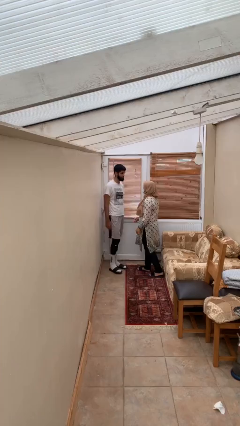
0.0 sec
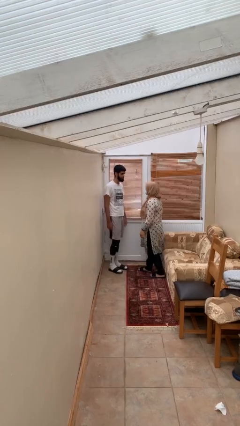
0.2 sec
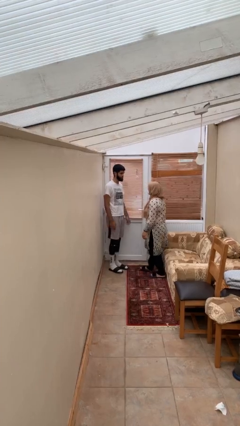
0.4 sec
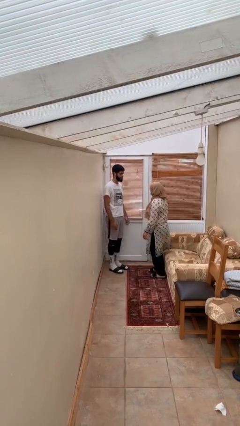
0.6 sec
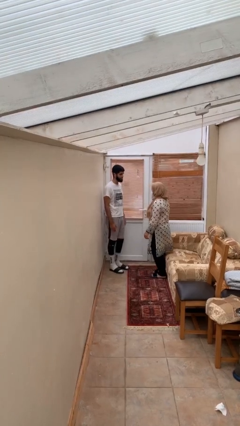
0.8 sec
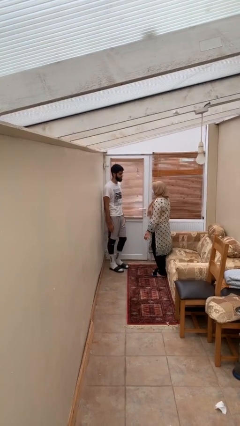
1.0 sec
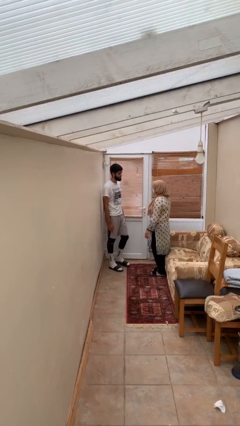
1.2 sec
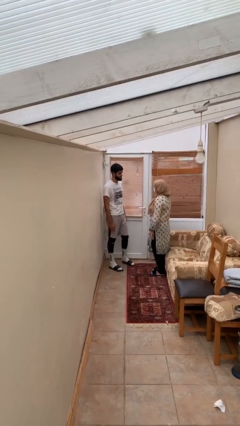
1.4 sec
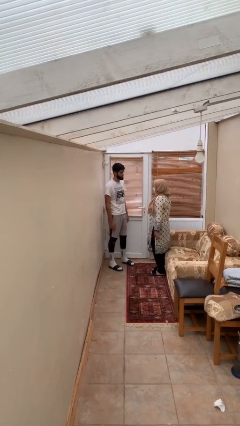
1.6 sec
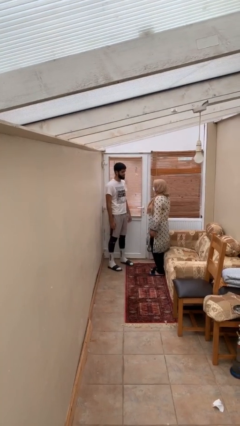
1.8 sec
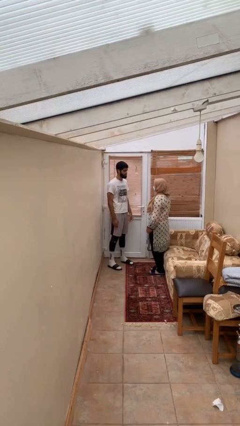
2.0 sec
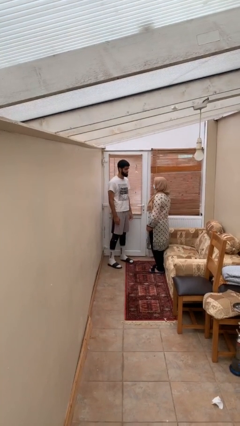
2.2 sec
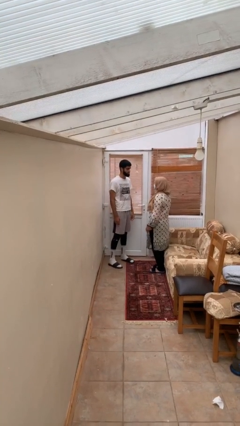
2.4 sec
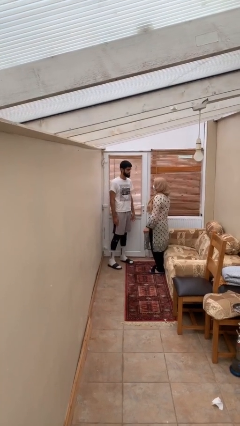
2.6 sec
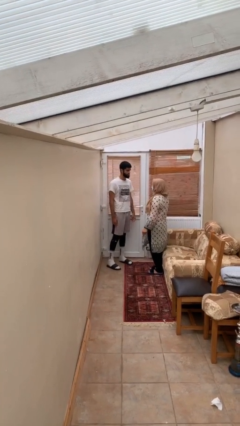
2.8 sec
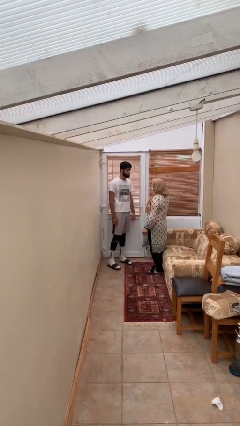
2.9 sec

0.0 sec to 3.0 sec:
person talks to person

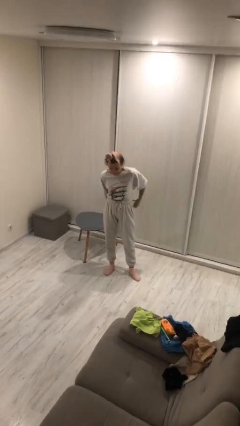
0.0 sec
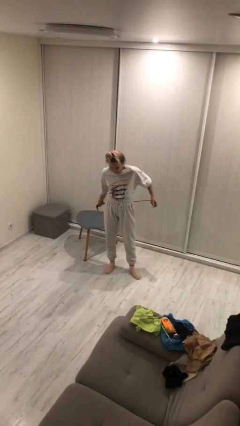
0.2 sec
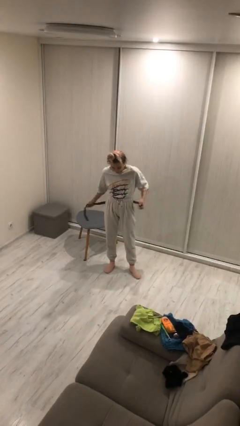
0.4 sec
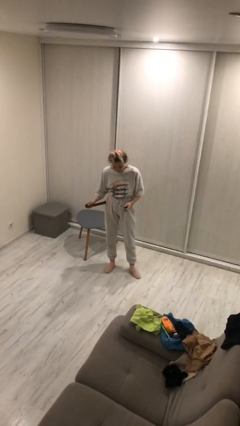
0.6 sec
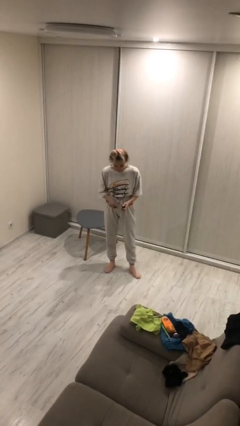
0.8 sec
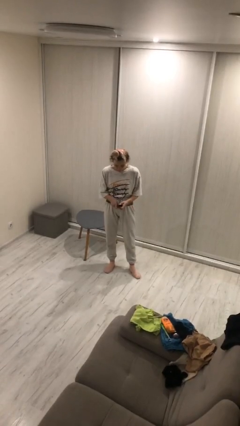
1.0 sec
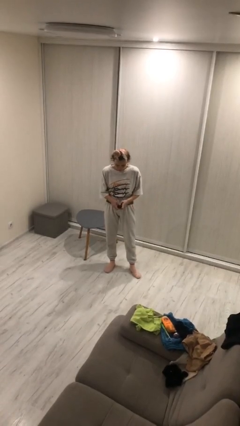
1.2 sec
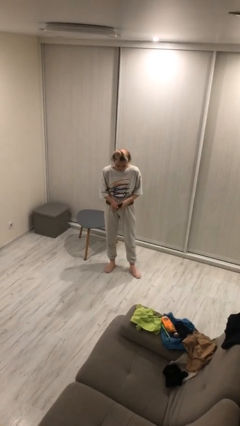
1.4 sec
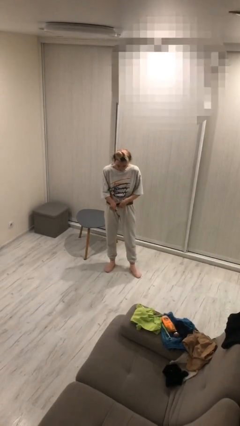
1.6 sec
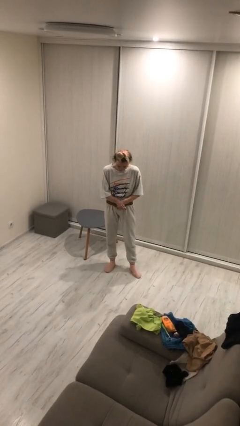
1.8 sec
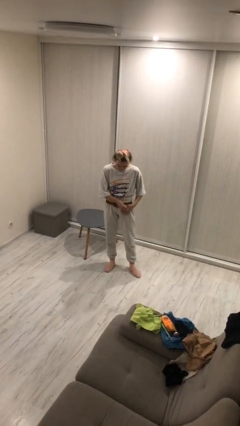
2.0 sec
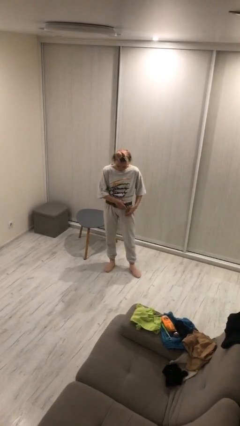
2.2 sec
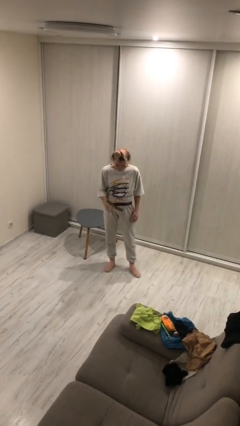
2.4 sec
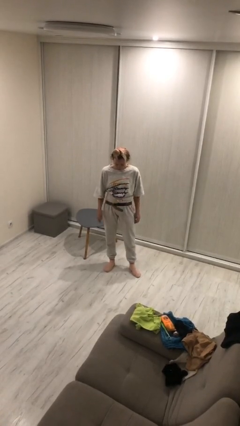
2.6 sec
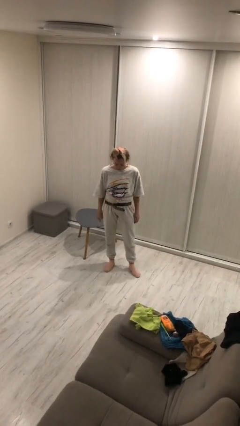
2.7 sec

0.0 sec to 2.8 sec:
person puts on belt

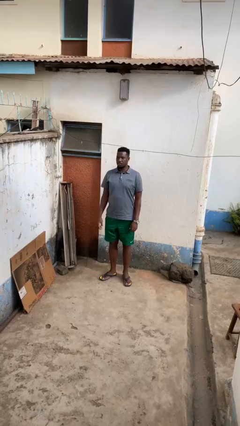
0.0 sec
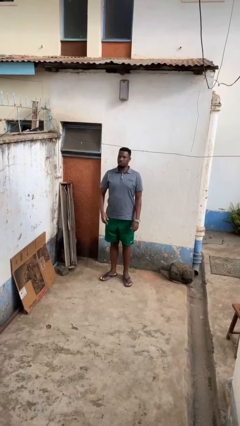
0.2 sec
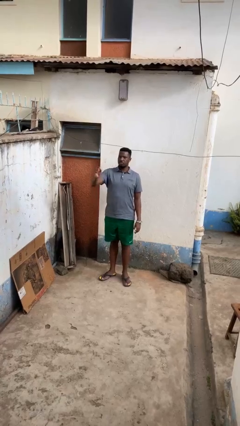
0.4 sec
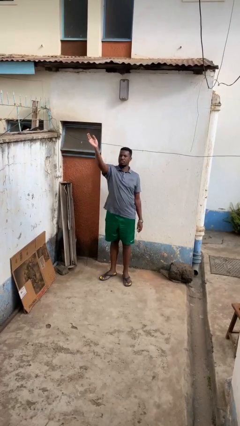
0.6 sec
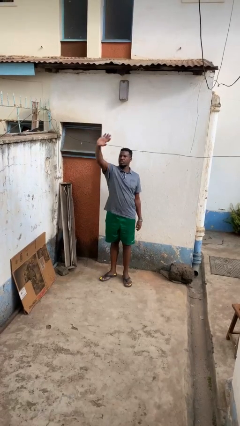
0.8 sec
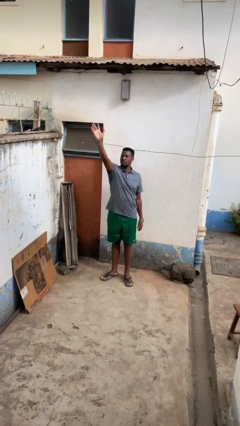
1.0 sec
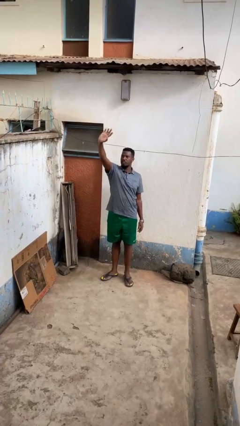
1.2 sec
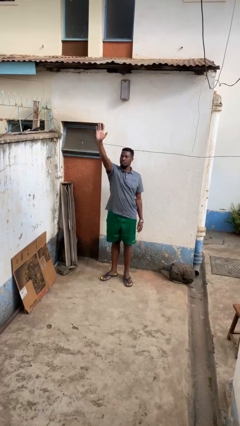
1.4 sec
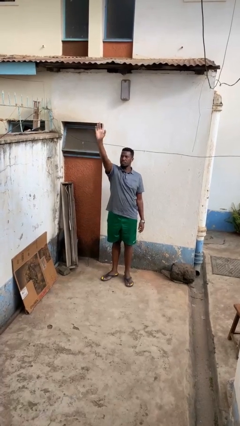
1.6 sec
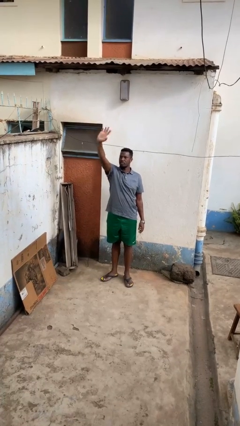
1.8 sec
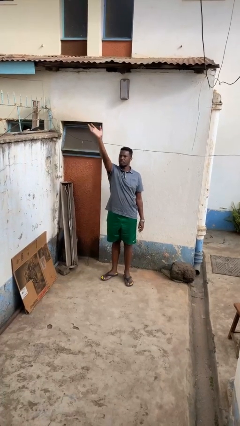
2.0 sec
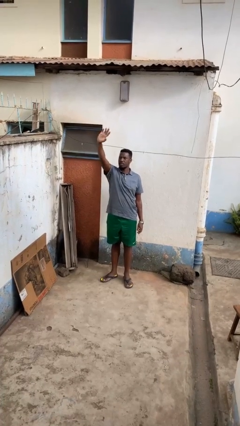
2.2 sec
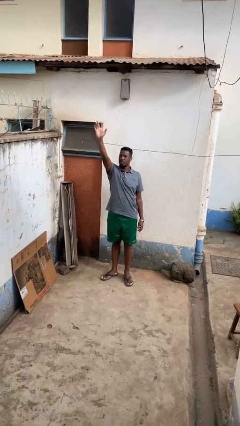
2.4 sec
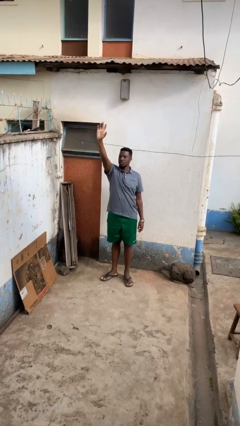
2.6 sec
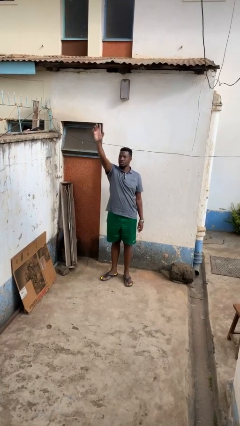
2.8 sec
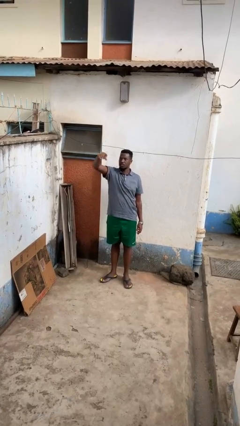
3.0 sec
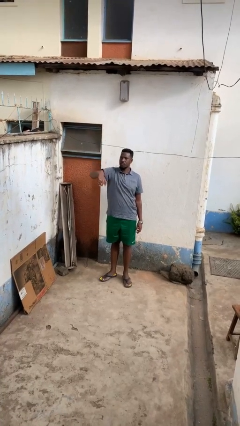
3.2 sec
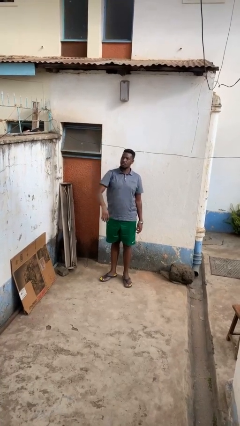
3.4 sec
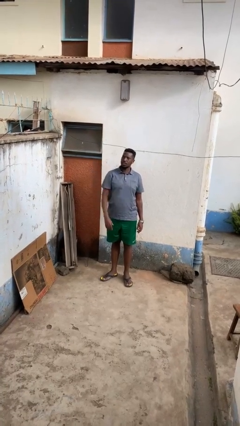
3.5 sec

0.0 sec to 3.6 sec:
person waves at person

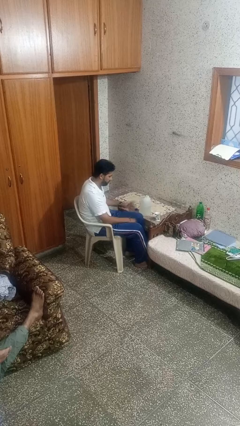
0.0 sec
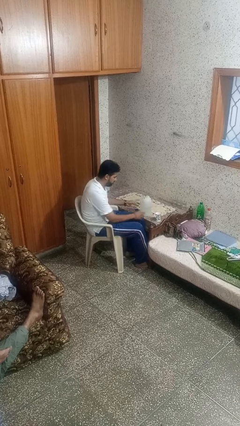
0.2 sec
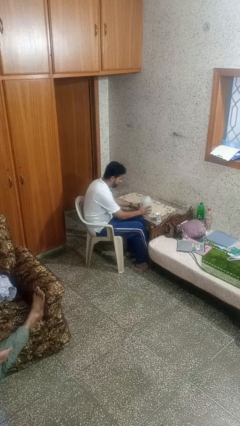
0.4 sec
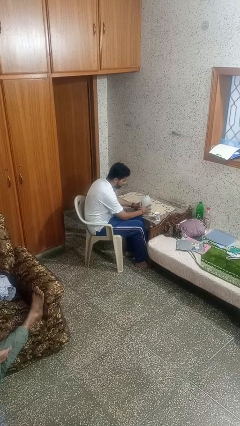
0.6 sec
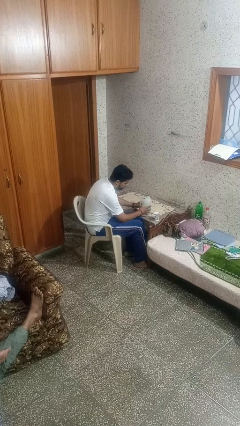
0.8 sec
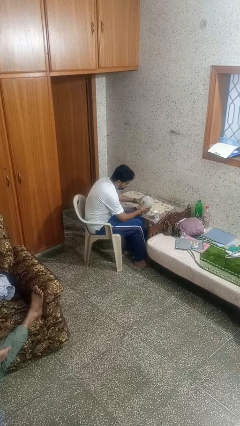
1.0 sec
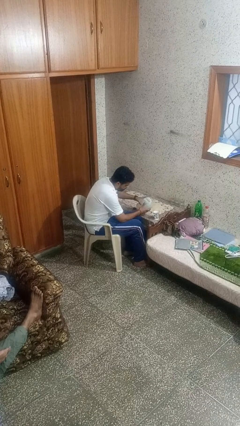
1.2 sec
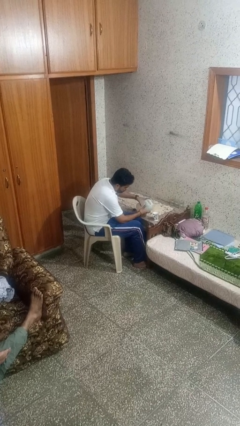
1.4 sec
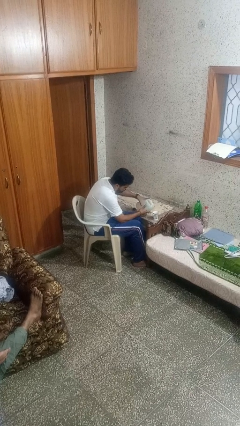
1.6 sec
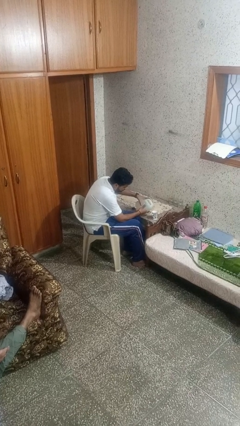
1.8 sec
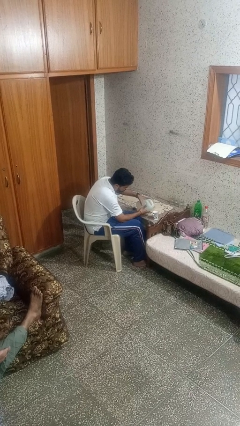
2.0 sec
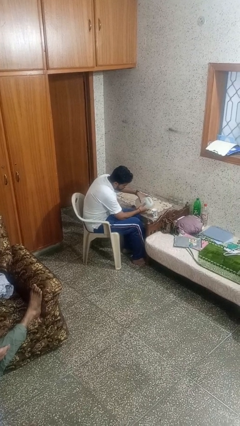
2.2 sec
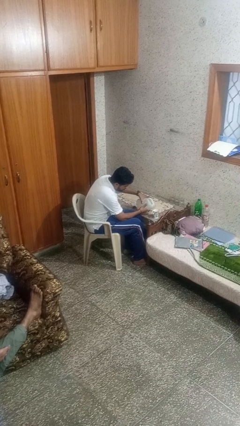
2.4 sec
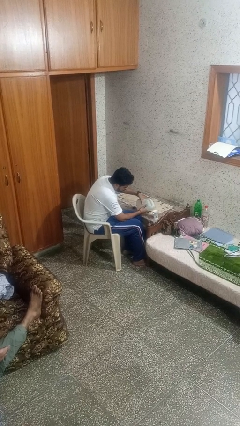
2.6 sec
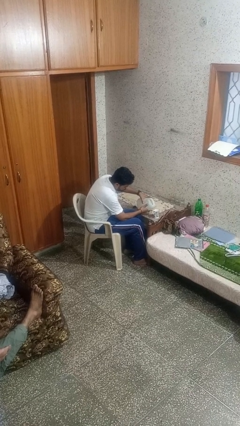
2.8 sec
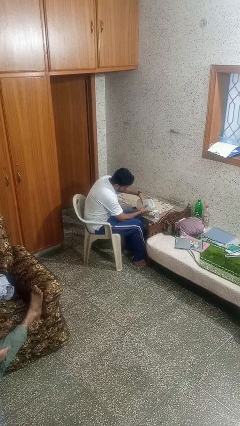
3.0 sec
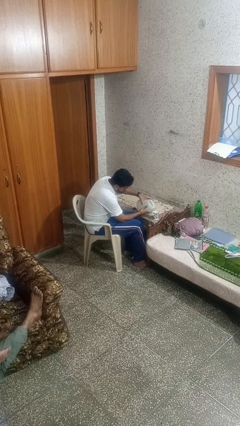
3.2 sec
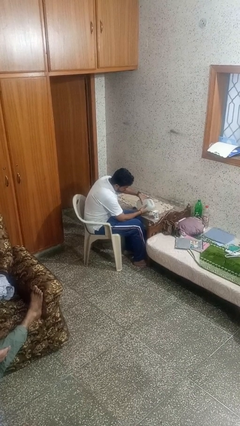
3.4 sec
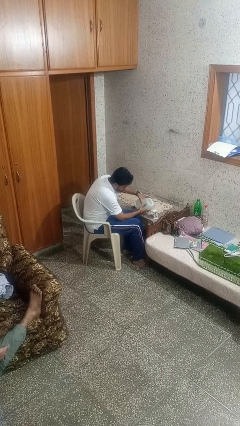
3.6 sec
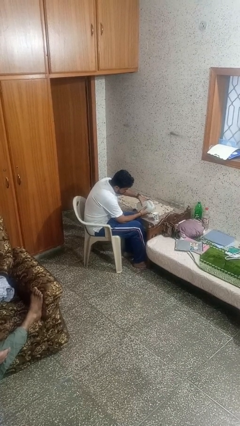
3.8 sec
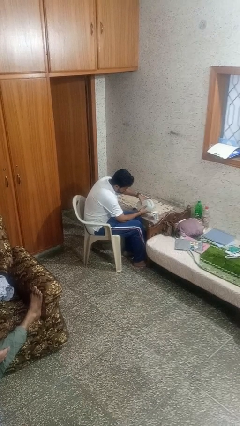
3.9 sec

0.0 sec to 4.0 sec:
person pours liquid into cup

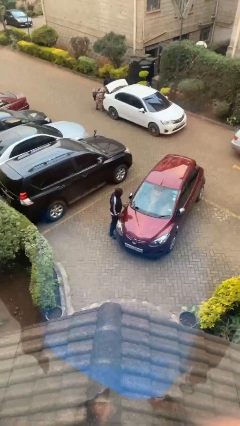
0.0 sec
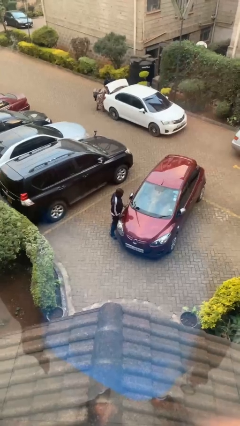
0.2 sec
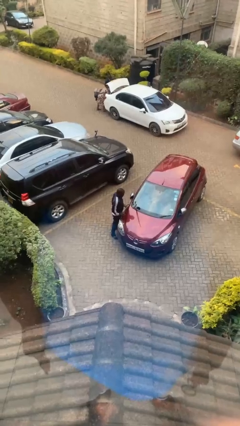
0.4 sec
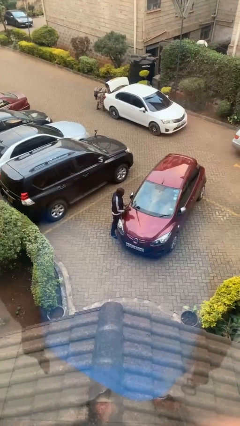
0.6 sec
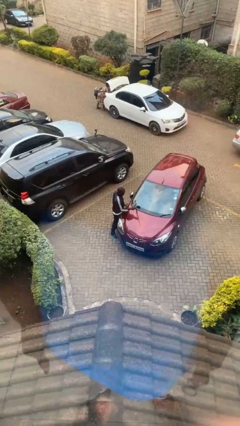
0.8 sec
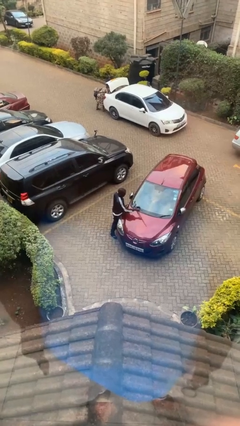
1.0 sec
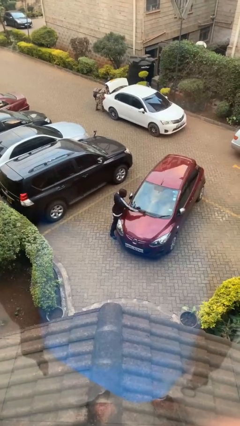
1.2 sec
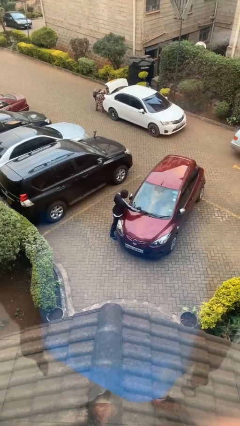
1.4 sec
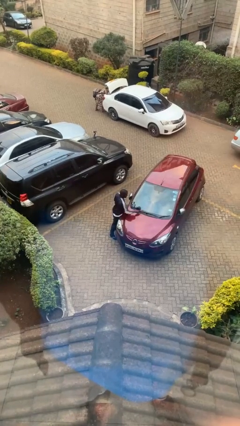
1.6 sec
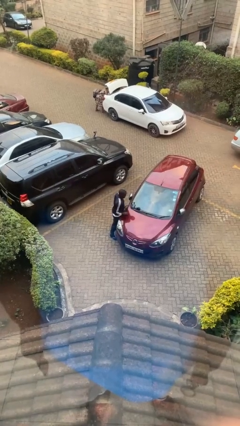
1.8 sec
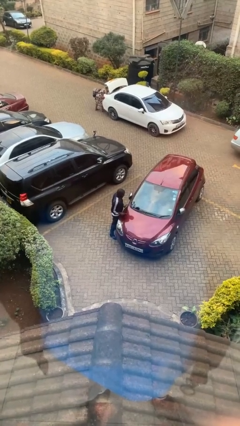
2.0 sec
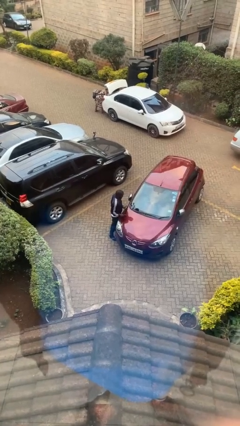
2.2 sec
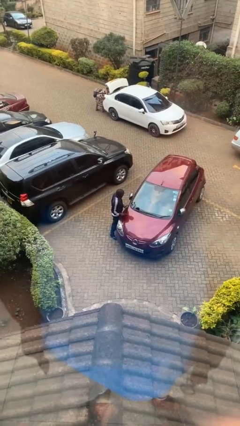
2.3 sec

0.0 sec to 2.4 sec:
person flips down car wipers

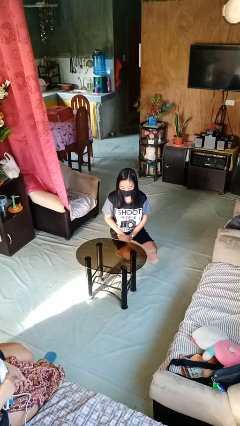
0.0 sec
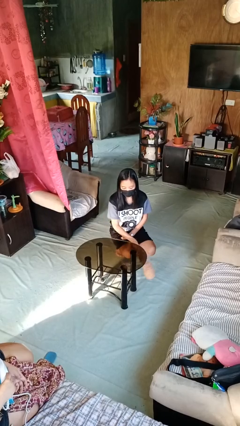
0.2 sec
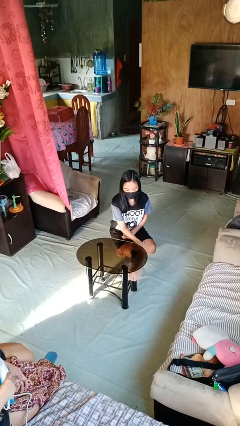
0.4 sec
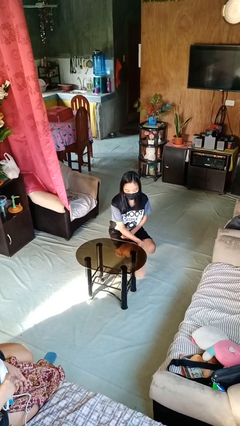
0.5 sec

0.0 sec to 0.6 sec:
person dusts furniture

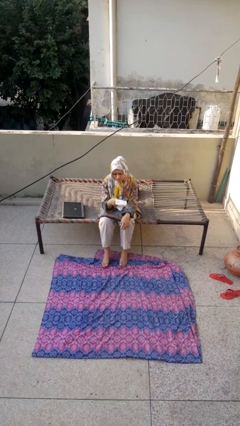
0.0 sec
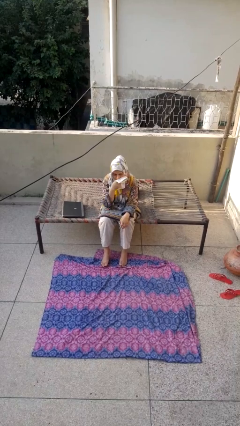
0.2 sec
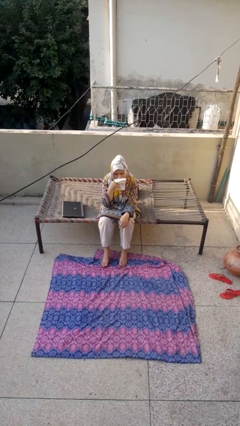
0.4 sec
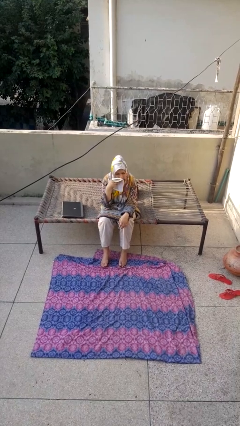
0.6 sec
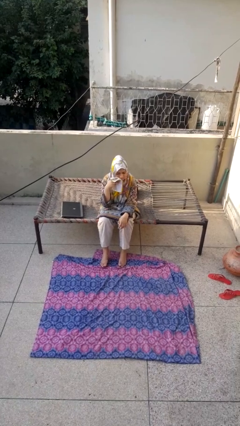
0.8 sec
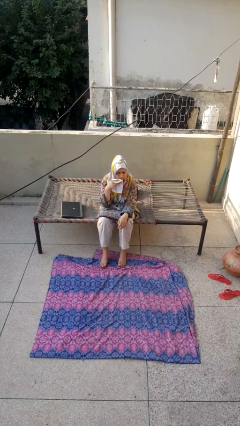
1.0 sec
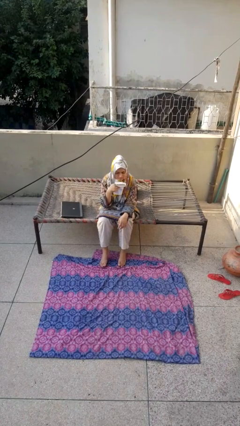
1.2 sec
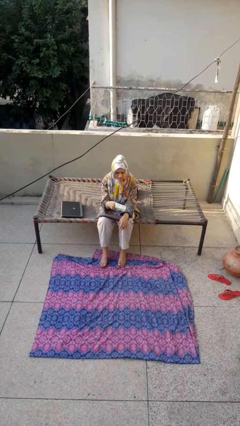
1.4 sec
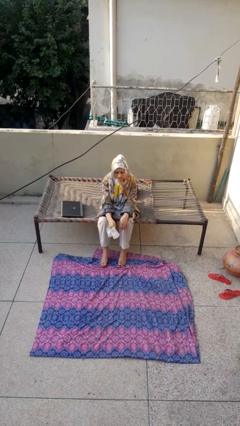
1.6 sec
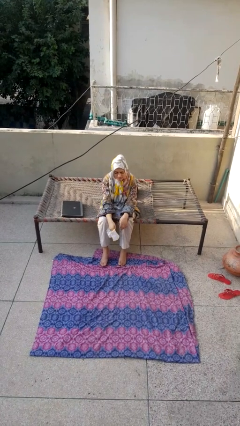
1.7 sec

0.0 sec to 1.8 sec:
person wipes mouth with napkin
